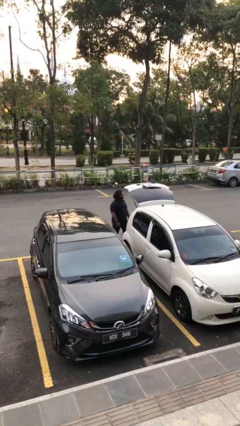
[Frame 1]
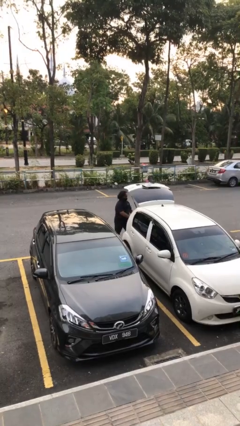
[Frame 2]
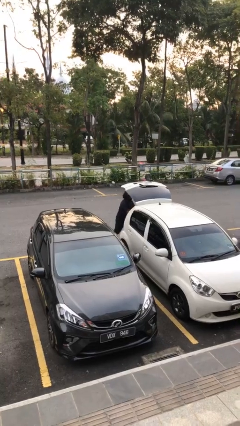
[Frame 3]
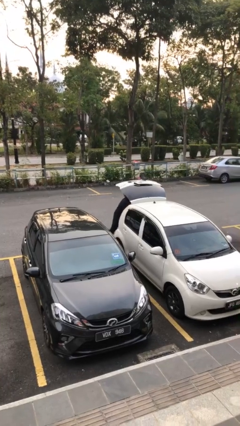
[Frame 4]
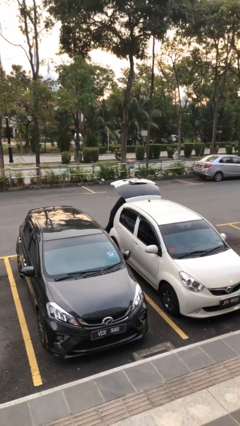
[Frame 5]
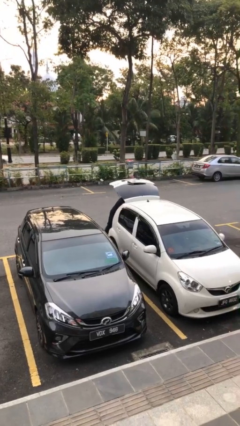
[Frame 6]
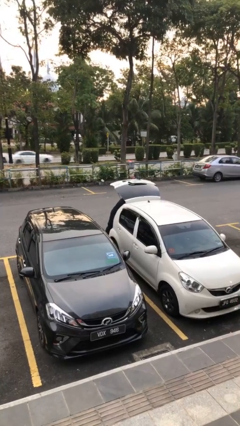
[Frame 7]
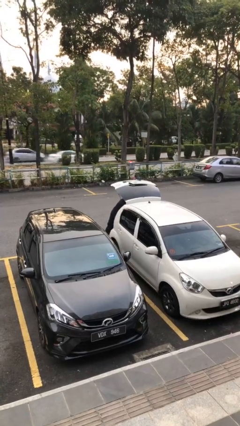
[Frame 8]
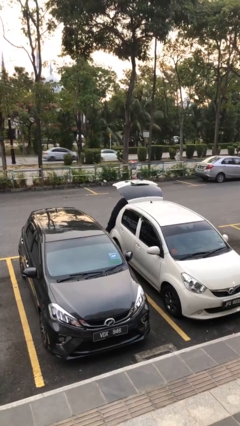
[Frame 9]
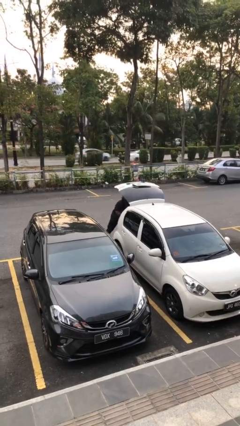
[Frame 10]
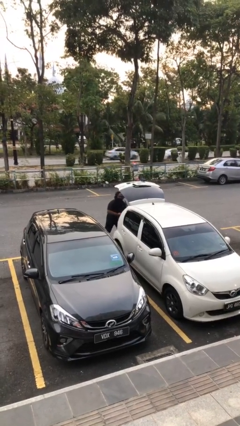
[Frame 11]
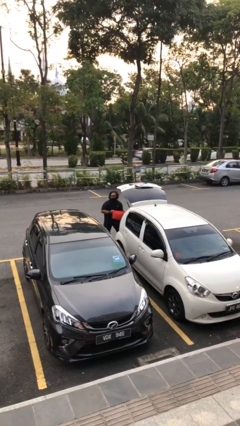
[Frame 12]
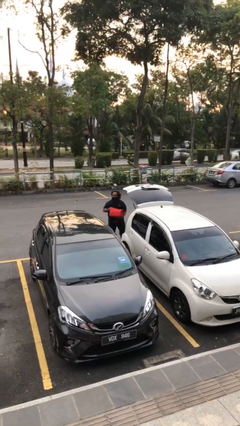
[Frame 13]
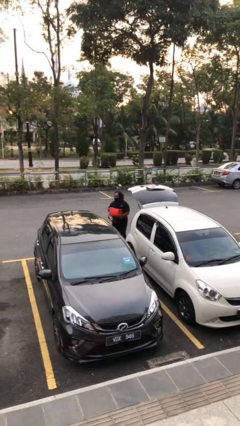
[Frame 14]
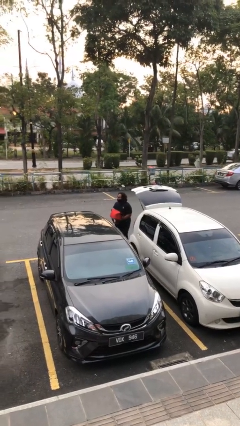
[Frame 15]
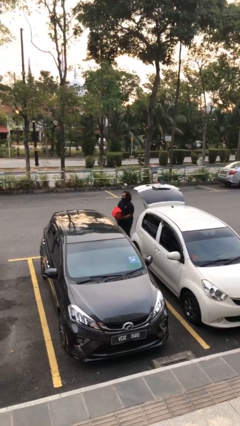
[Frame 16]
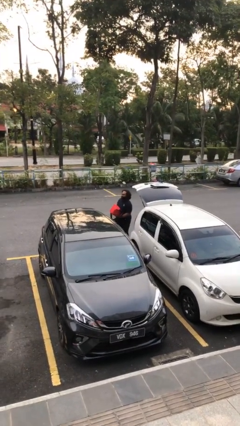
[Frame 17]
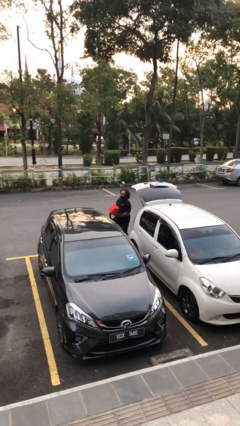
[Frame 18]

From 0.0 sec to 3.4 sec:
person unloads car

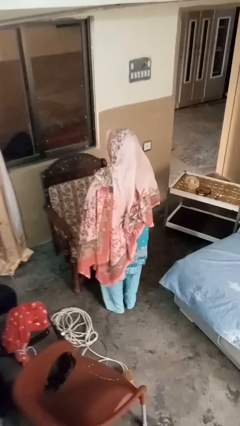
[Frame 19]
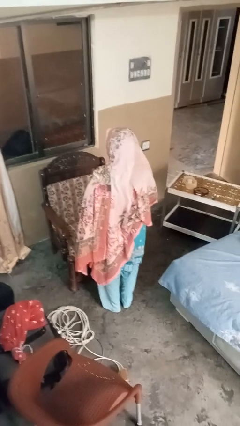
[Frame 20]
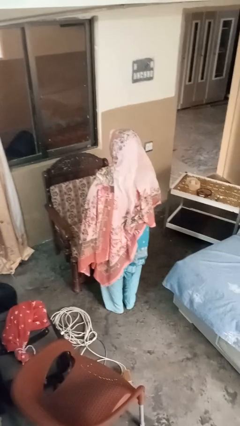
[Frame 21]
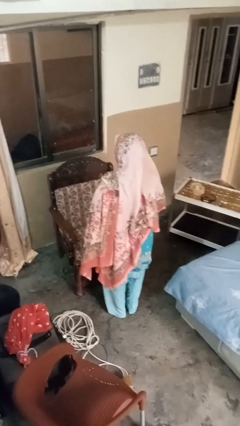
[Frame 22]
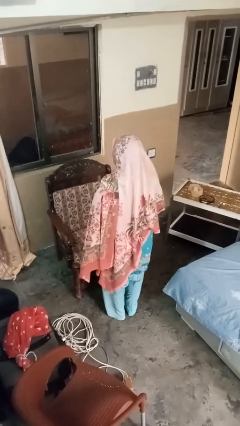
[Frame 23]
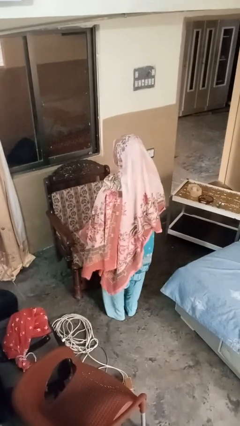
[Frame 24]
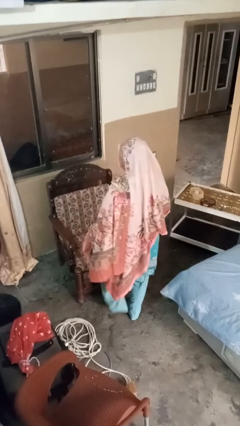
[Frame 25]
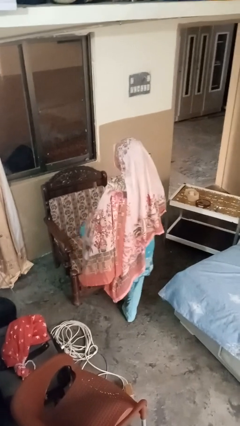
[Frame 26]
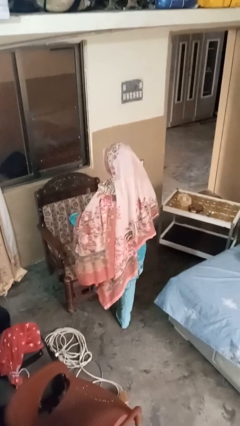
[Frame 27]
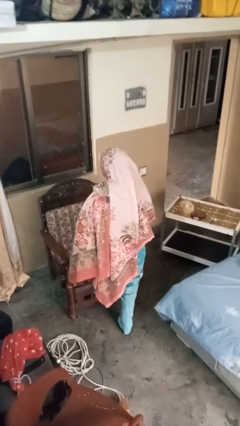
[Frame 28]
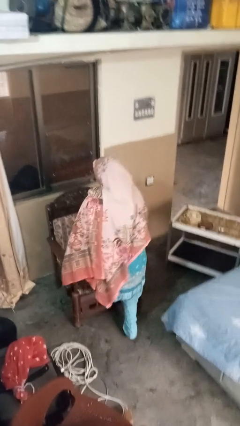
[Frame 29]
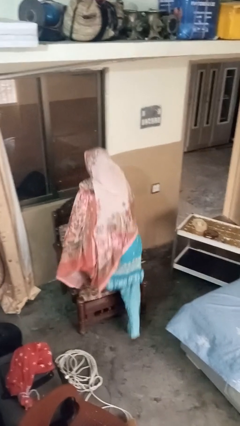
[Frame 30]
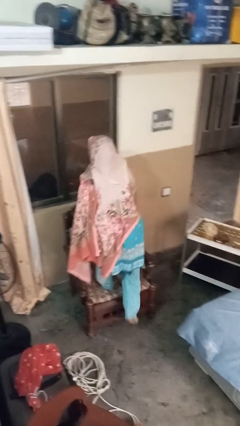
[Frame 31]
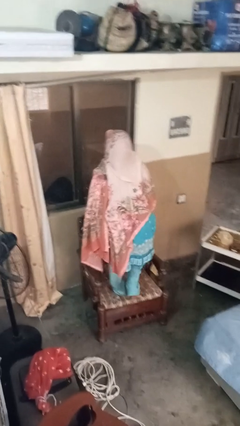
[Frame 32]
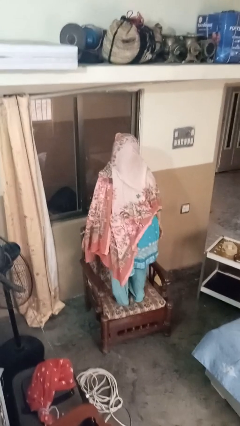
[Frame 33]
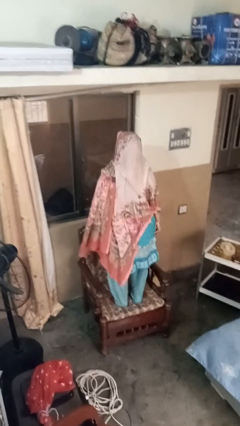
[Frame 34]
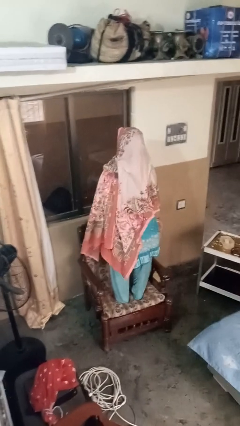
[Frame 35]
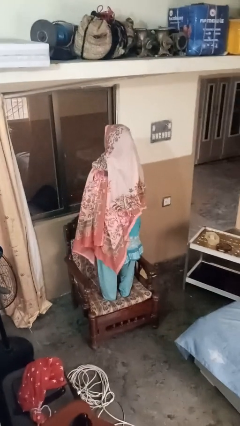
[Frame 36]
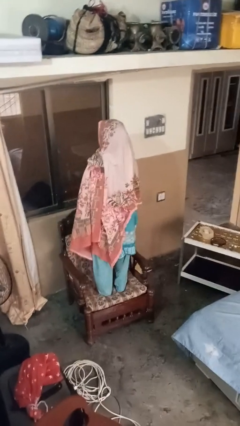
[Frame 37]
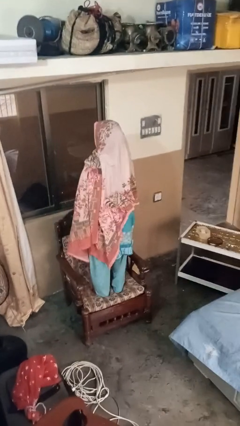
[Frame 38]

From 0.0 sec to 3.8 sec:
person climbs on couch

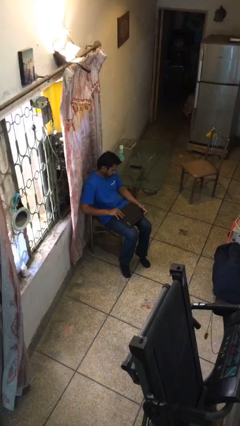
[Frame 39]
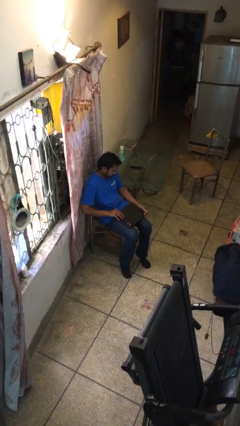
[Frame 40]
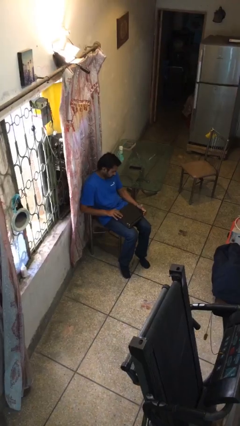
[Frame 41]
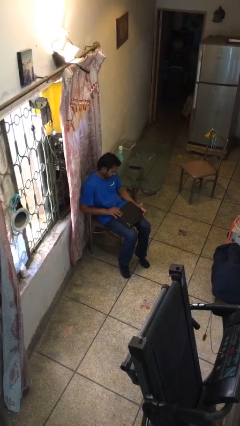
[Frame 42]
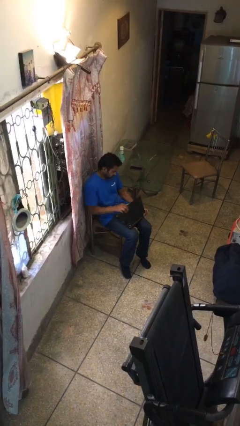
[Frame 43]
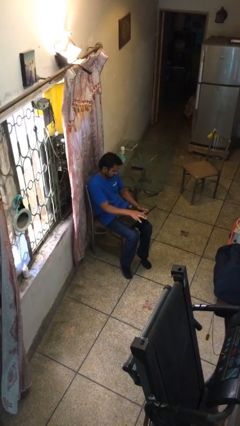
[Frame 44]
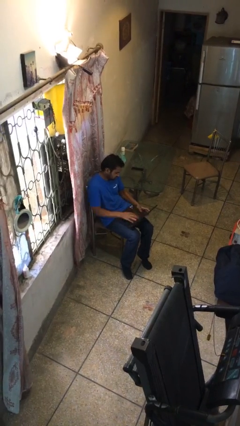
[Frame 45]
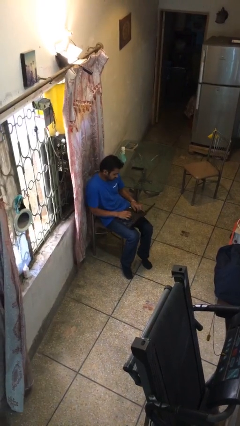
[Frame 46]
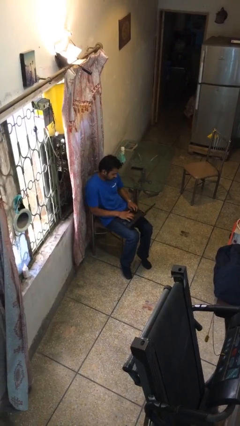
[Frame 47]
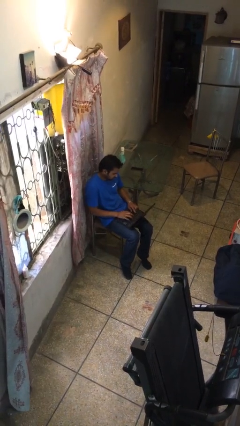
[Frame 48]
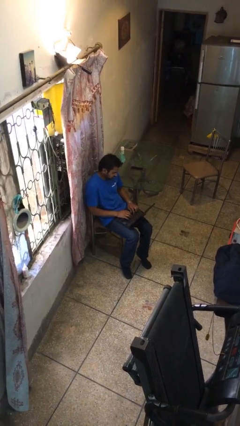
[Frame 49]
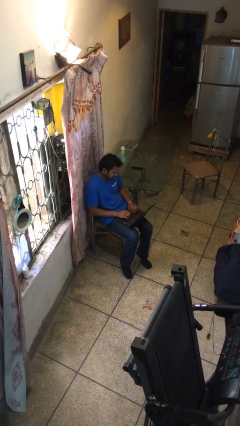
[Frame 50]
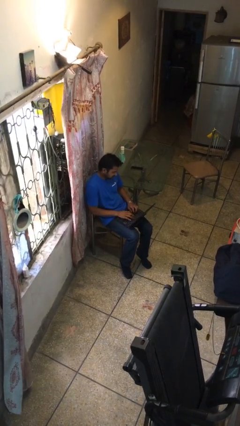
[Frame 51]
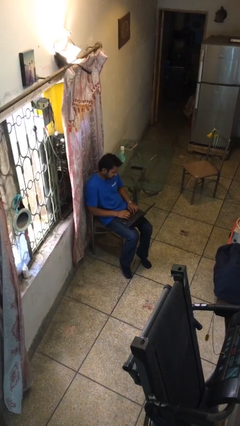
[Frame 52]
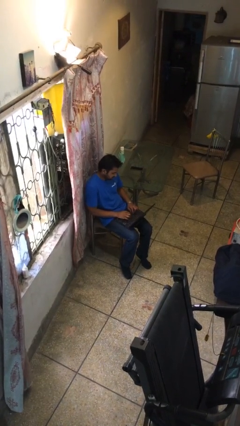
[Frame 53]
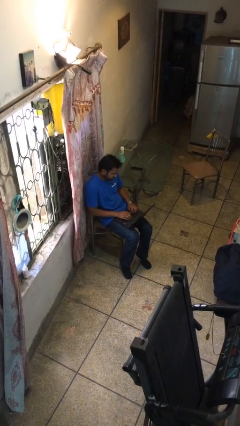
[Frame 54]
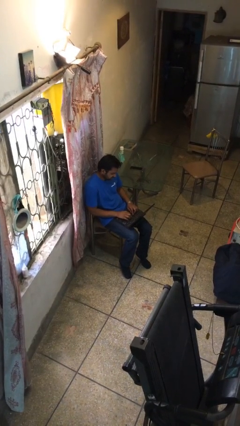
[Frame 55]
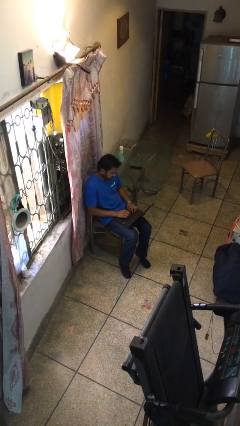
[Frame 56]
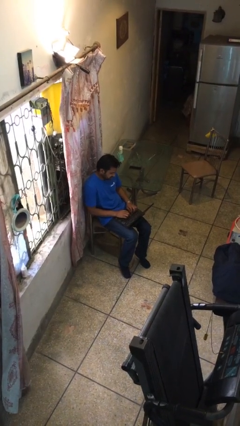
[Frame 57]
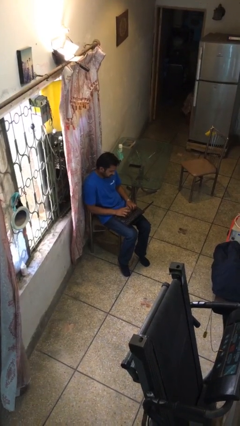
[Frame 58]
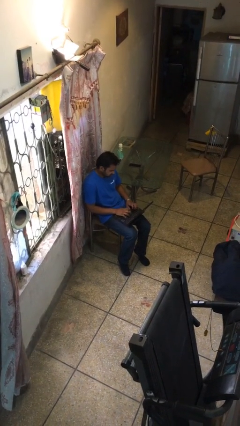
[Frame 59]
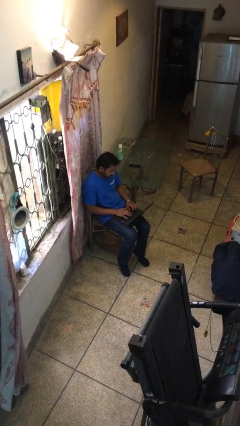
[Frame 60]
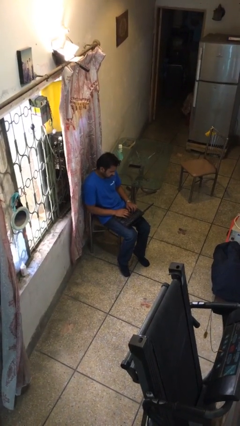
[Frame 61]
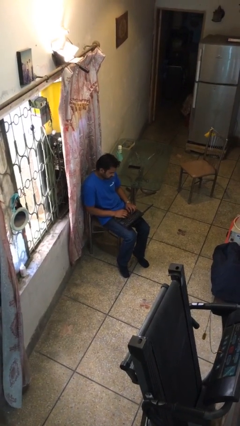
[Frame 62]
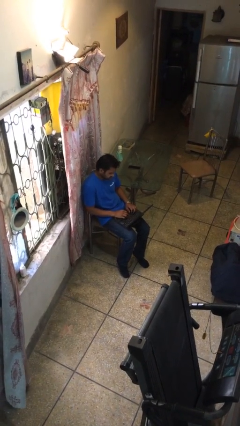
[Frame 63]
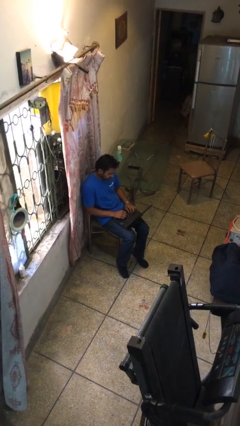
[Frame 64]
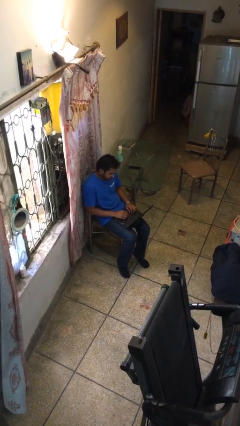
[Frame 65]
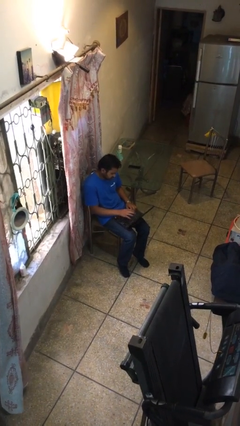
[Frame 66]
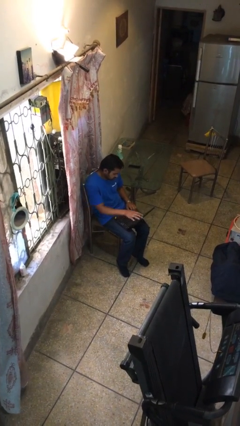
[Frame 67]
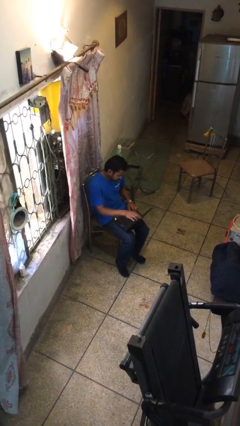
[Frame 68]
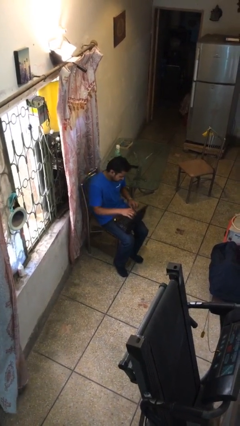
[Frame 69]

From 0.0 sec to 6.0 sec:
person interacts with laptop

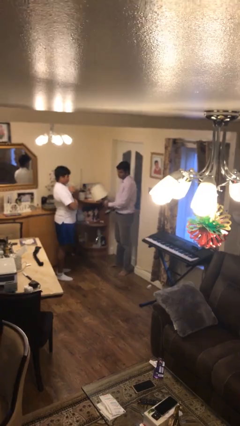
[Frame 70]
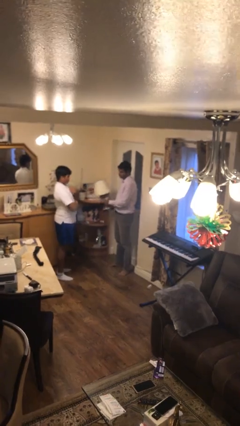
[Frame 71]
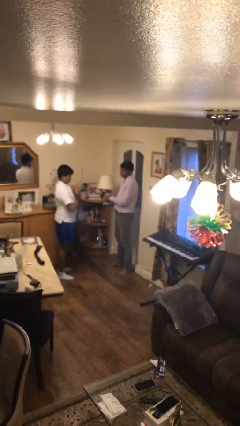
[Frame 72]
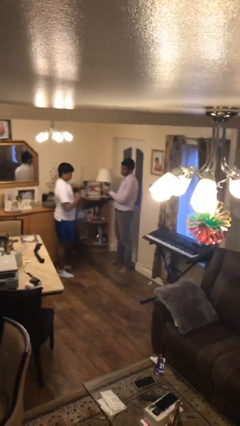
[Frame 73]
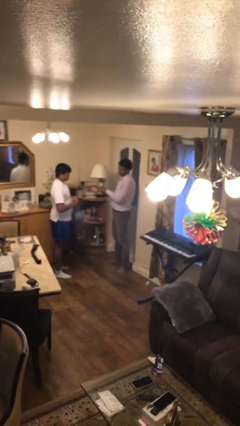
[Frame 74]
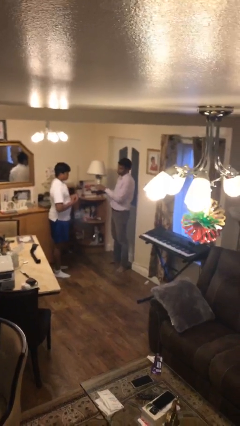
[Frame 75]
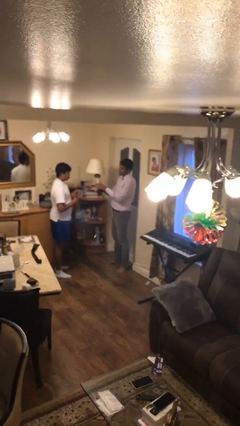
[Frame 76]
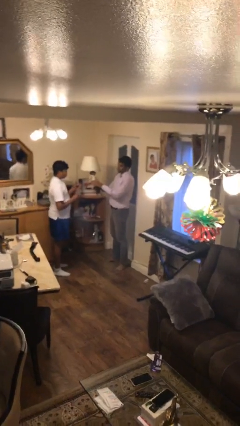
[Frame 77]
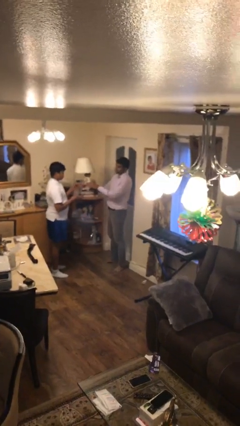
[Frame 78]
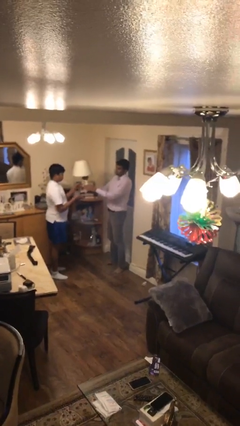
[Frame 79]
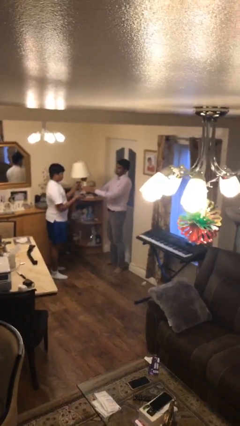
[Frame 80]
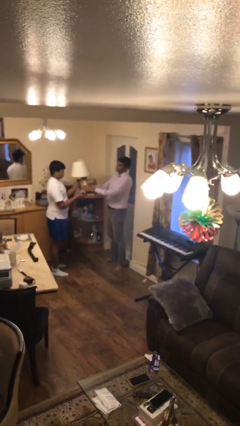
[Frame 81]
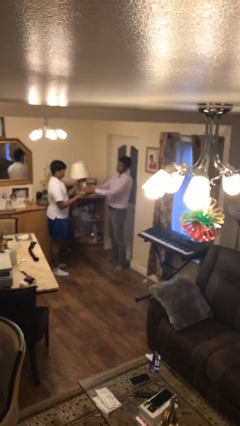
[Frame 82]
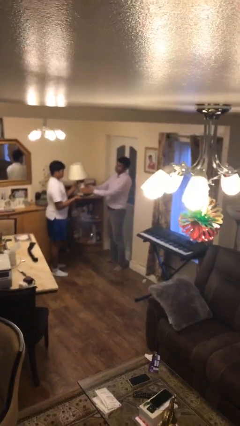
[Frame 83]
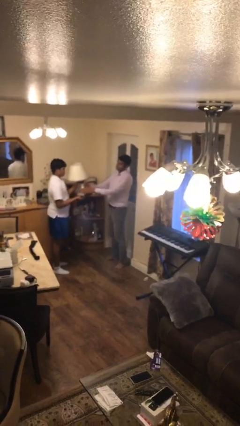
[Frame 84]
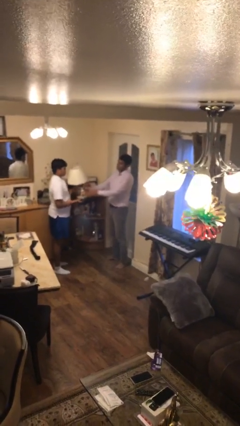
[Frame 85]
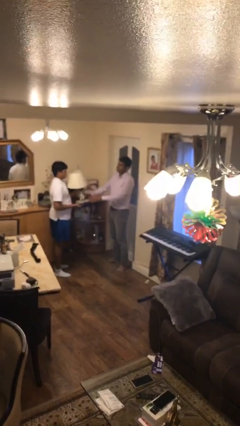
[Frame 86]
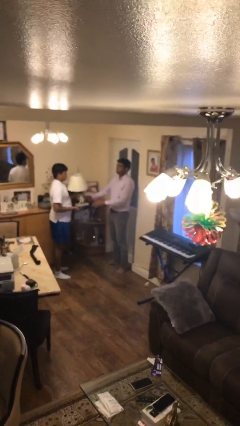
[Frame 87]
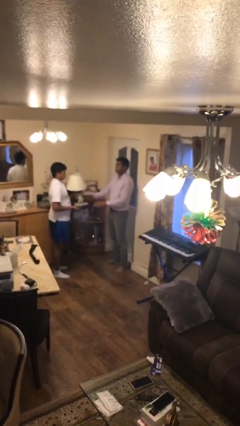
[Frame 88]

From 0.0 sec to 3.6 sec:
person transfers object to person

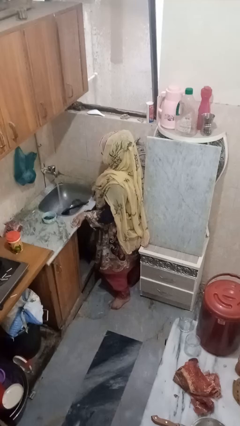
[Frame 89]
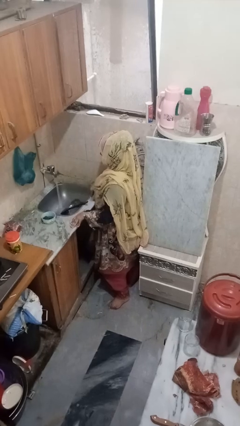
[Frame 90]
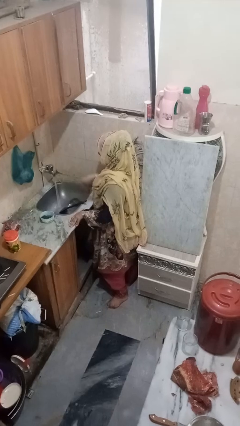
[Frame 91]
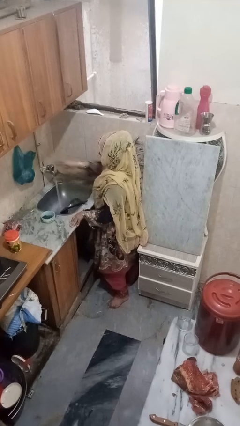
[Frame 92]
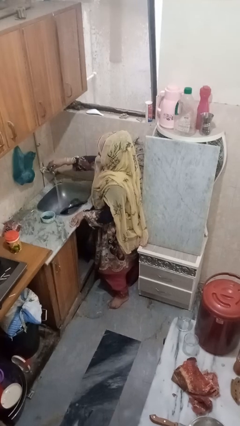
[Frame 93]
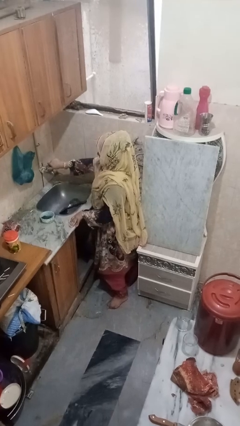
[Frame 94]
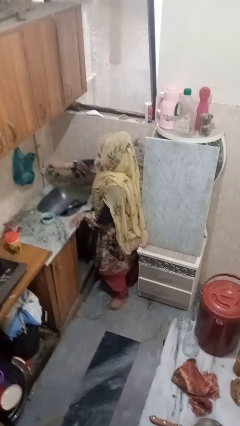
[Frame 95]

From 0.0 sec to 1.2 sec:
person turns off faucet
